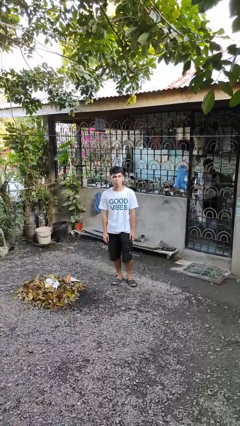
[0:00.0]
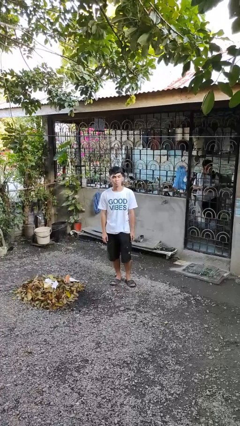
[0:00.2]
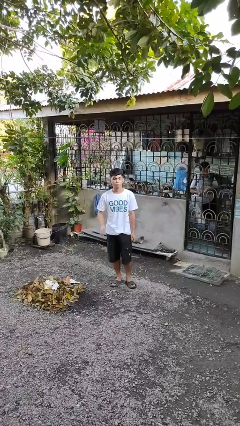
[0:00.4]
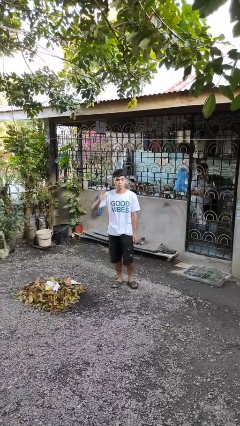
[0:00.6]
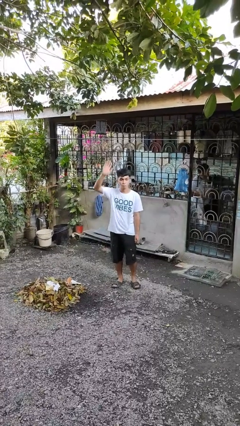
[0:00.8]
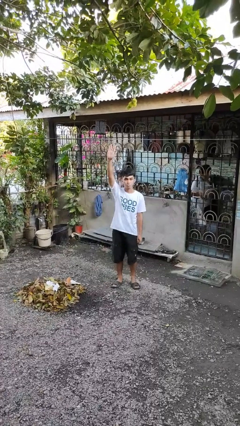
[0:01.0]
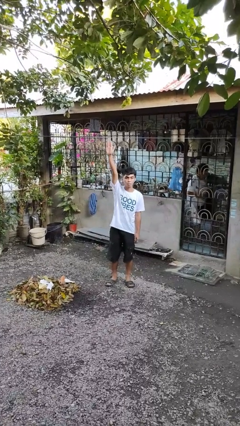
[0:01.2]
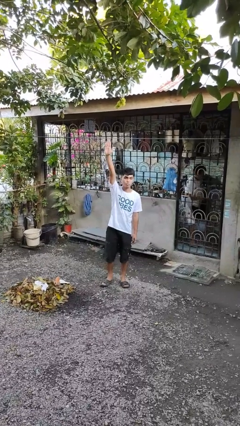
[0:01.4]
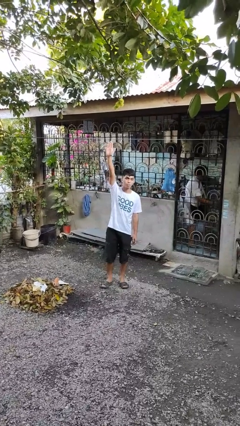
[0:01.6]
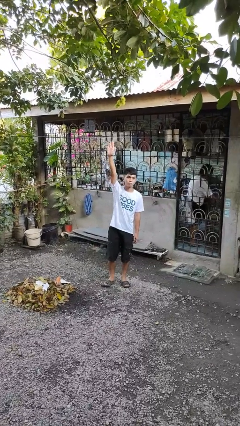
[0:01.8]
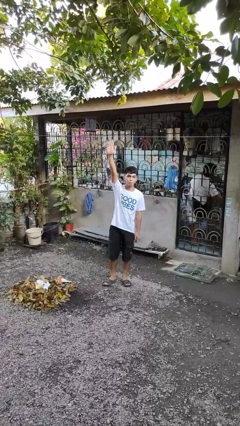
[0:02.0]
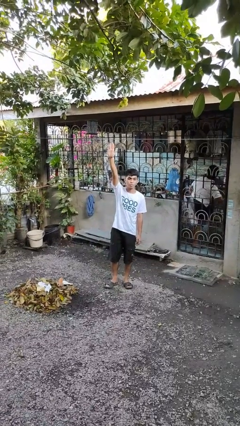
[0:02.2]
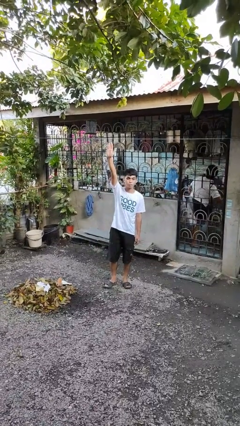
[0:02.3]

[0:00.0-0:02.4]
person gestures raise hand

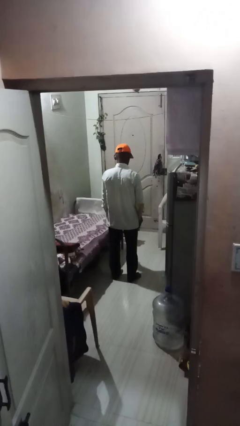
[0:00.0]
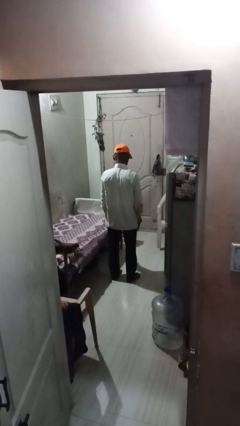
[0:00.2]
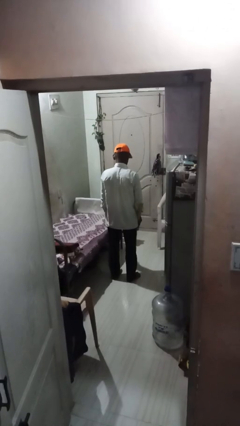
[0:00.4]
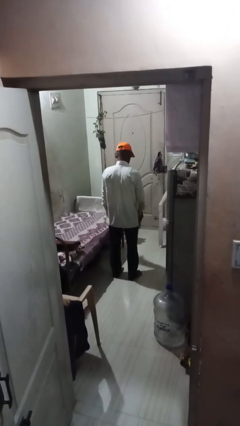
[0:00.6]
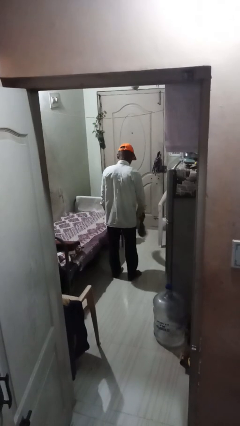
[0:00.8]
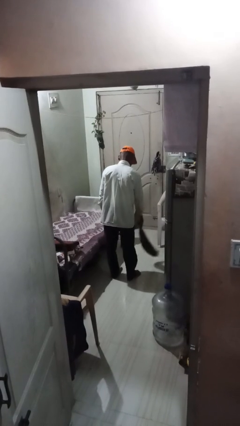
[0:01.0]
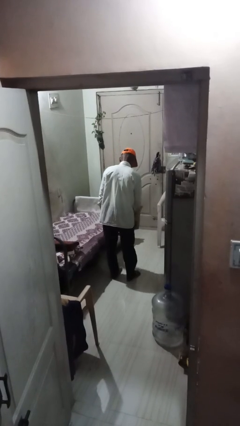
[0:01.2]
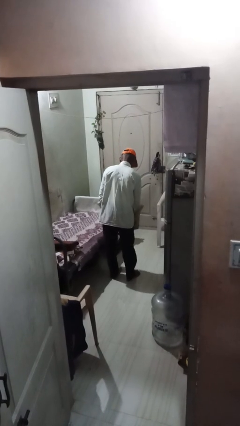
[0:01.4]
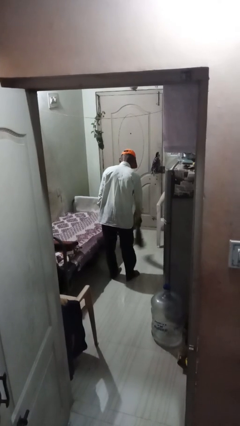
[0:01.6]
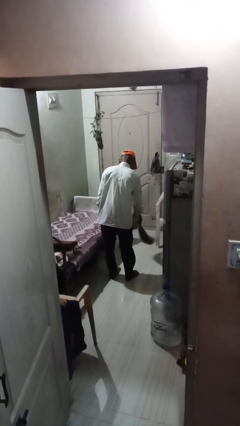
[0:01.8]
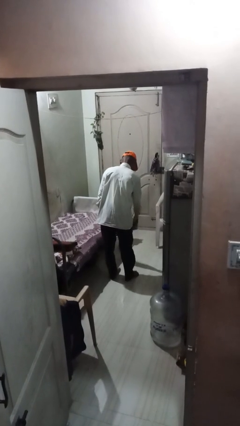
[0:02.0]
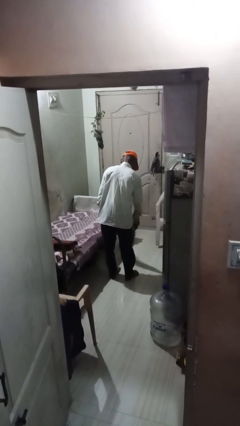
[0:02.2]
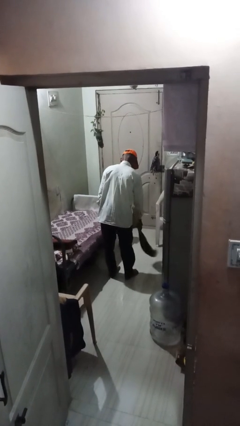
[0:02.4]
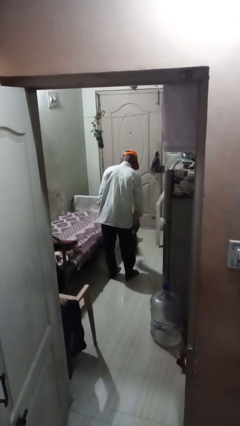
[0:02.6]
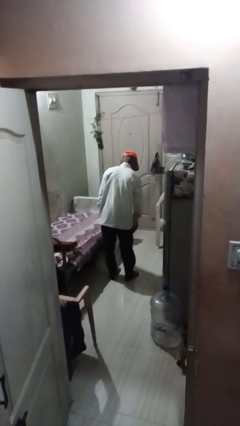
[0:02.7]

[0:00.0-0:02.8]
person mops

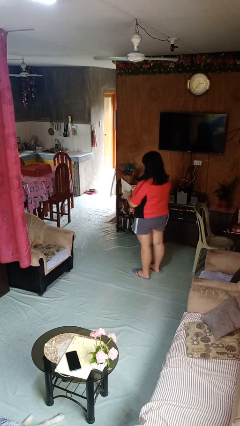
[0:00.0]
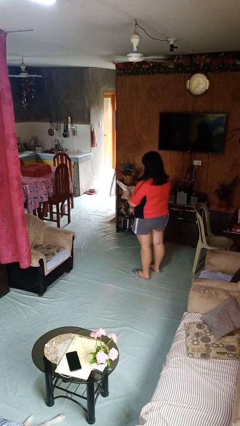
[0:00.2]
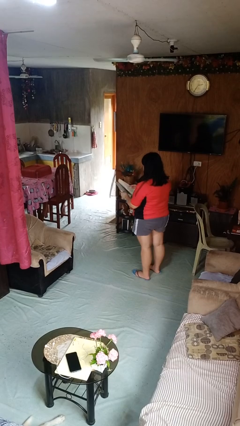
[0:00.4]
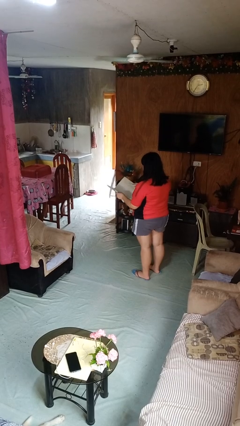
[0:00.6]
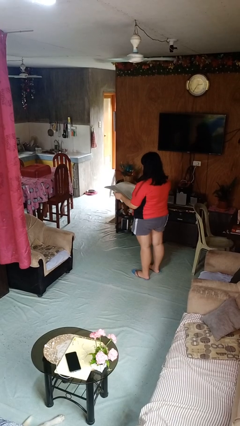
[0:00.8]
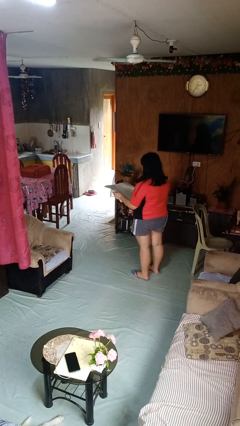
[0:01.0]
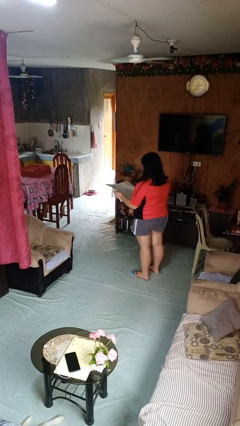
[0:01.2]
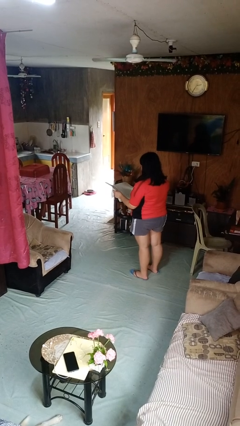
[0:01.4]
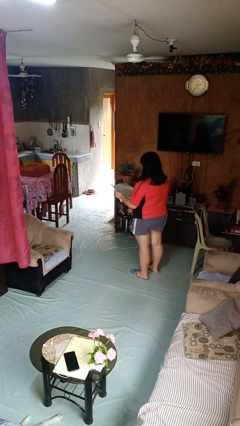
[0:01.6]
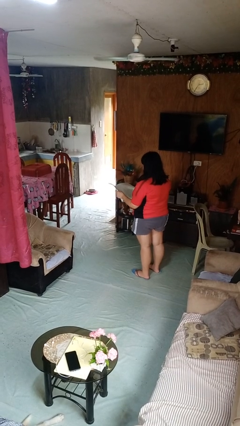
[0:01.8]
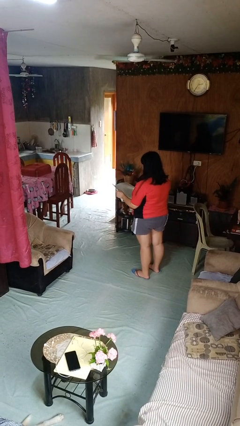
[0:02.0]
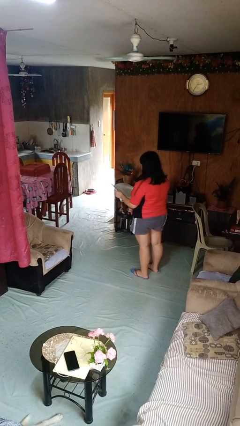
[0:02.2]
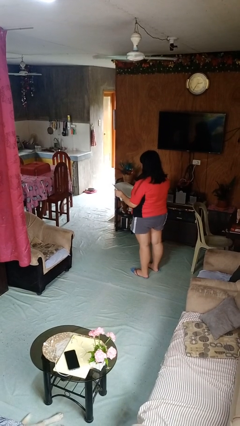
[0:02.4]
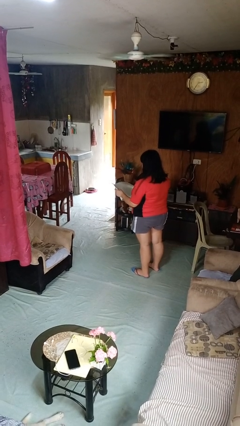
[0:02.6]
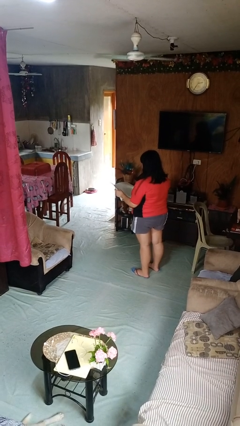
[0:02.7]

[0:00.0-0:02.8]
person reads newspaper

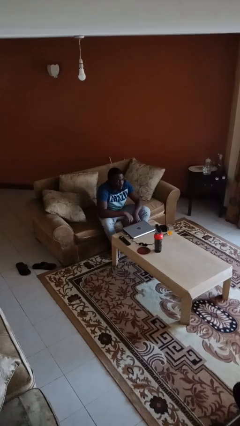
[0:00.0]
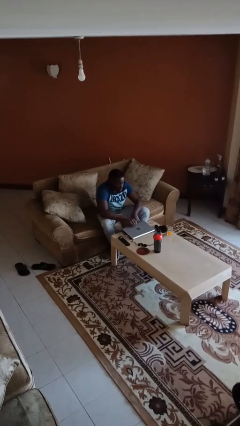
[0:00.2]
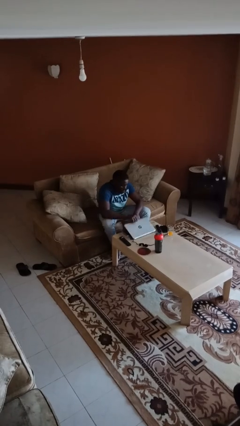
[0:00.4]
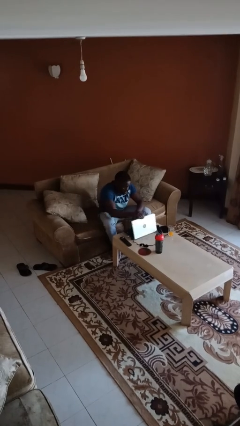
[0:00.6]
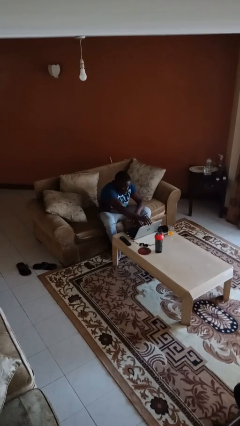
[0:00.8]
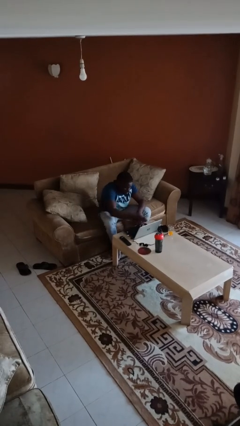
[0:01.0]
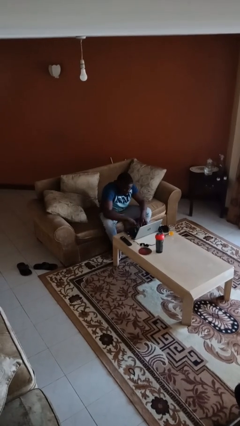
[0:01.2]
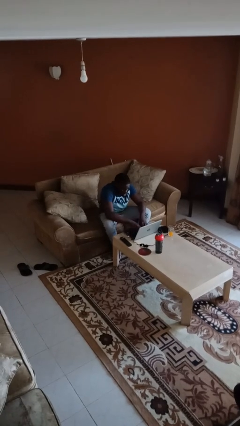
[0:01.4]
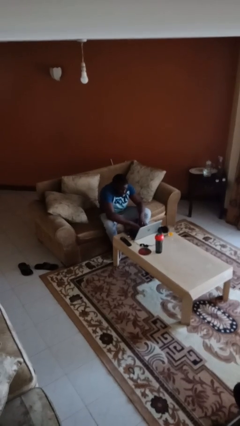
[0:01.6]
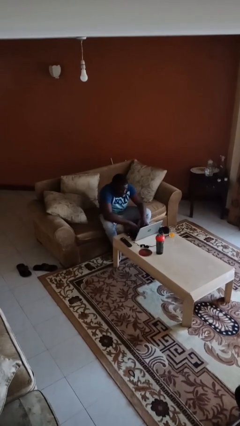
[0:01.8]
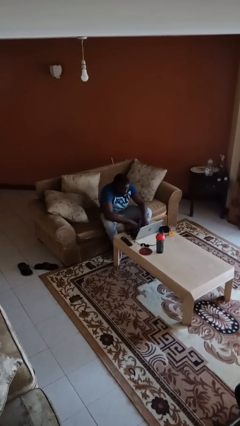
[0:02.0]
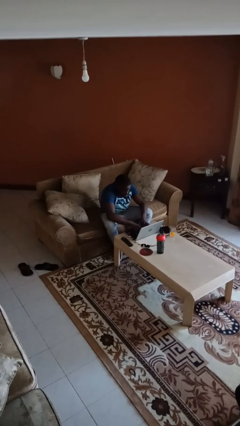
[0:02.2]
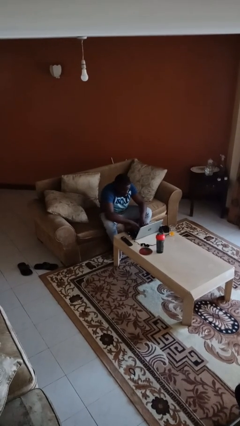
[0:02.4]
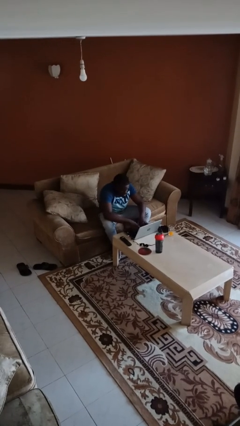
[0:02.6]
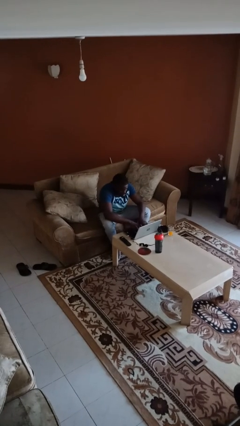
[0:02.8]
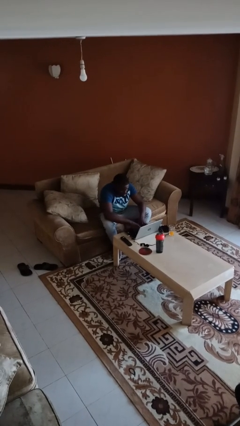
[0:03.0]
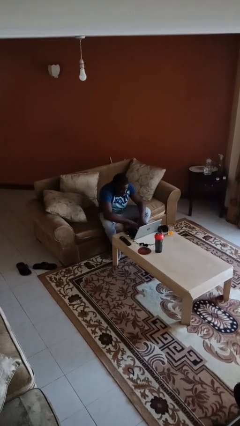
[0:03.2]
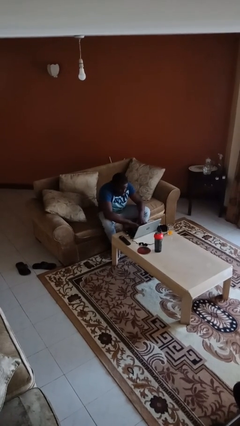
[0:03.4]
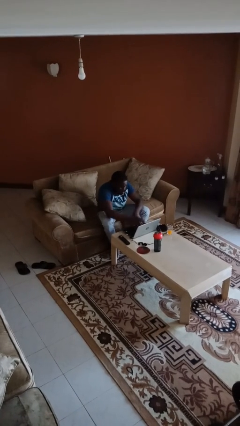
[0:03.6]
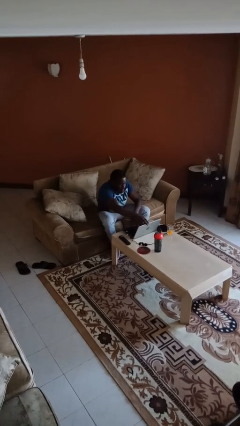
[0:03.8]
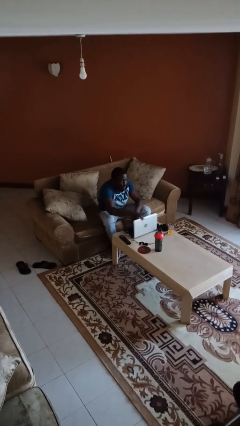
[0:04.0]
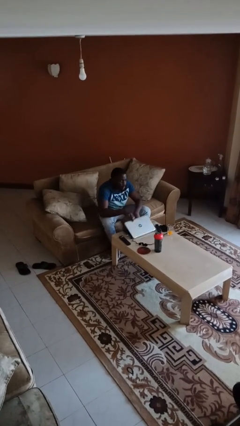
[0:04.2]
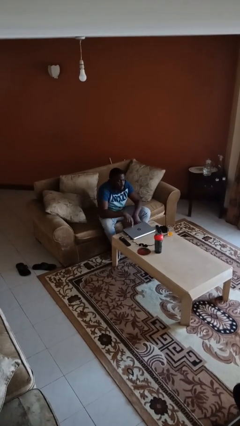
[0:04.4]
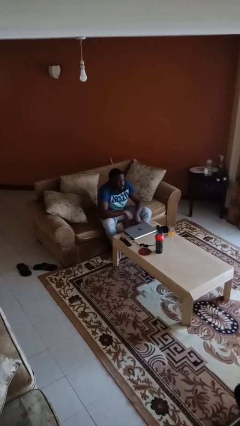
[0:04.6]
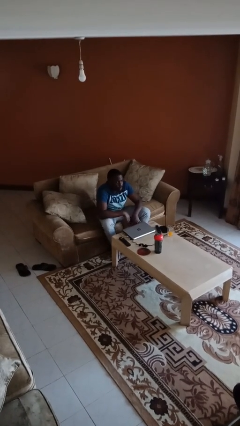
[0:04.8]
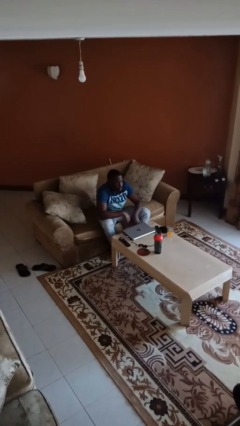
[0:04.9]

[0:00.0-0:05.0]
person interacts with laptop

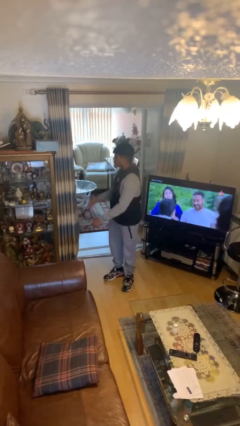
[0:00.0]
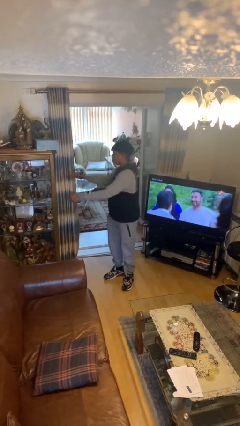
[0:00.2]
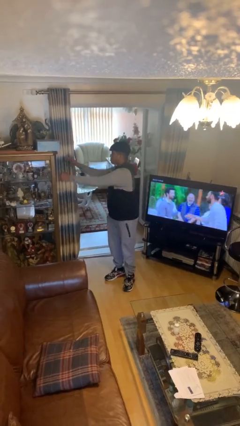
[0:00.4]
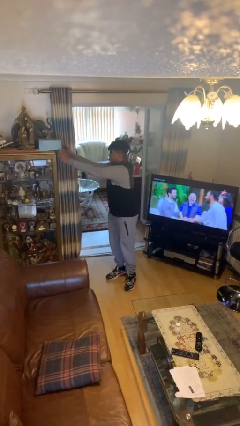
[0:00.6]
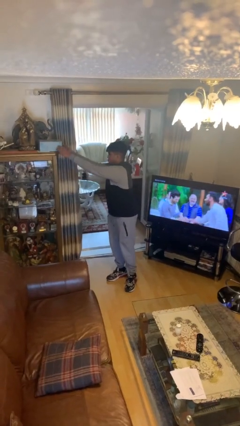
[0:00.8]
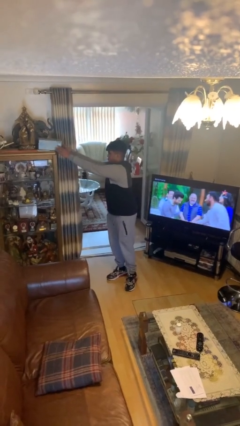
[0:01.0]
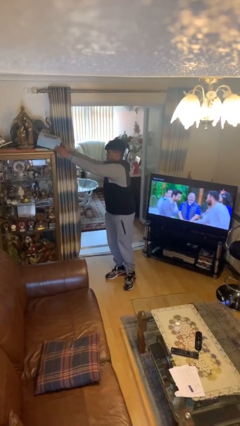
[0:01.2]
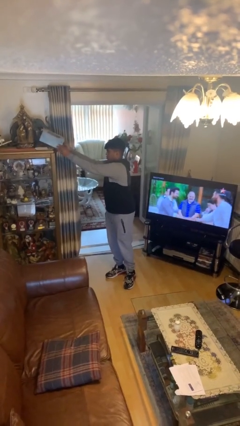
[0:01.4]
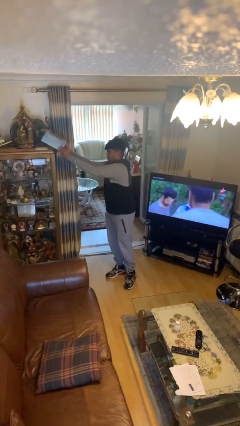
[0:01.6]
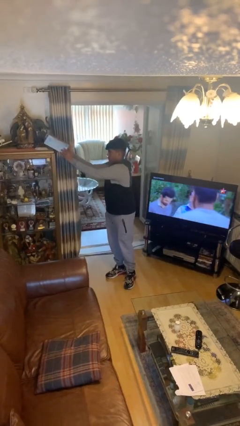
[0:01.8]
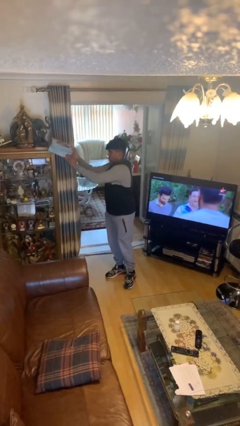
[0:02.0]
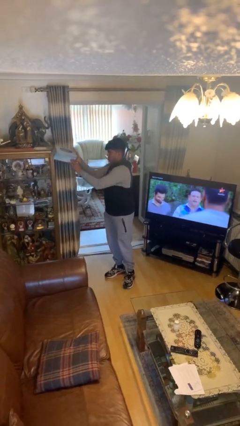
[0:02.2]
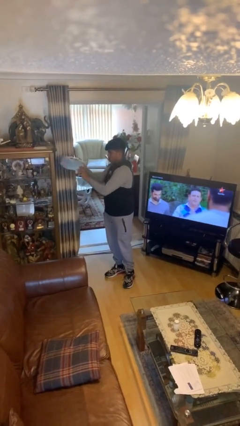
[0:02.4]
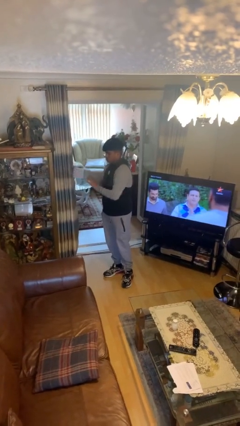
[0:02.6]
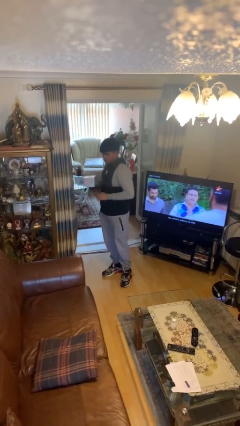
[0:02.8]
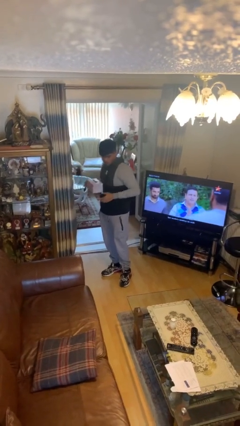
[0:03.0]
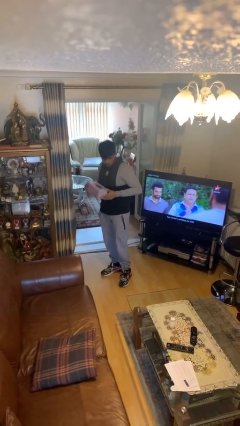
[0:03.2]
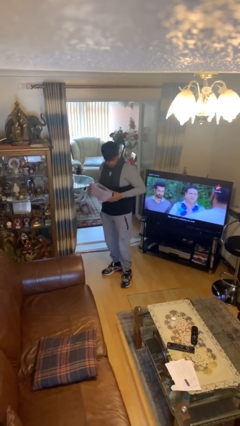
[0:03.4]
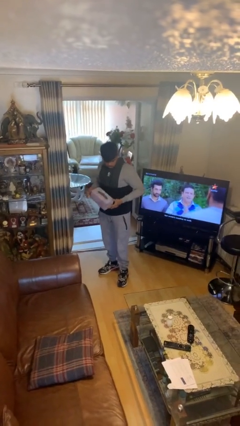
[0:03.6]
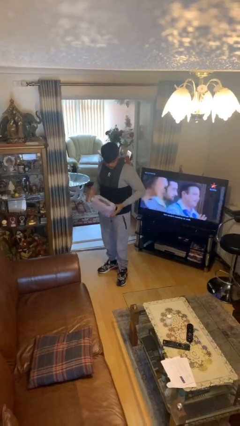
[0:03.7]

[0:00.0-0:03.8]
person picks up object from shelf

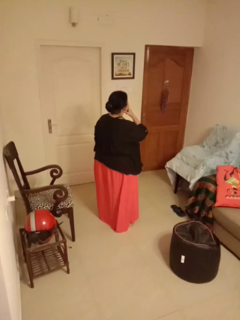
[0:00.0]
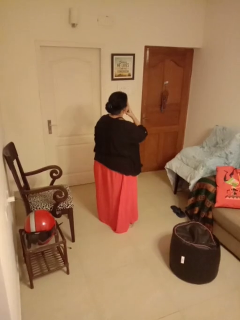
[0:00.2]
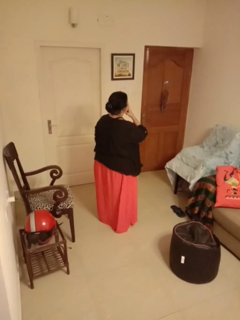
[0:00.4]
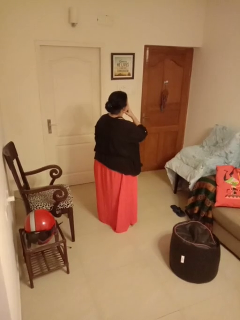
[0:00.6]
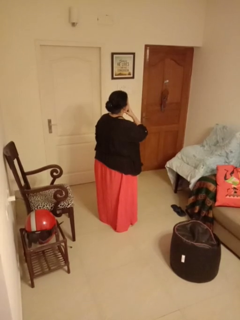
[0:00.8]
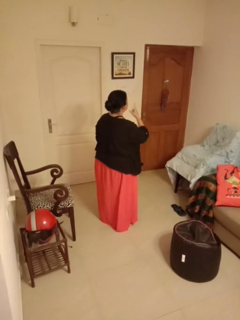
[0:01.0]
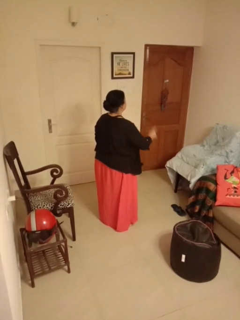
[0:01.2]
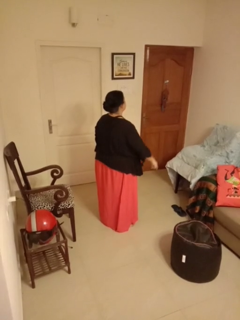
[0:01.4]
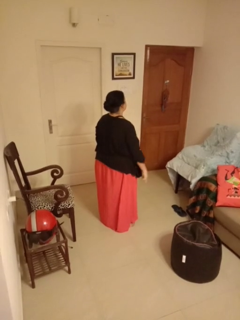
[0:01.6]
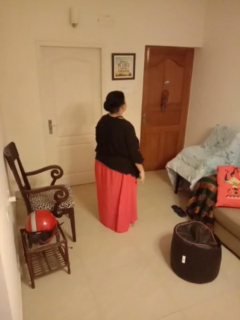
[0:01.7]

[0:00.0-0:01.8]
person gestures be quiet
